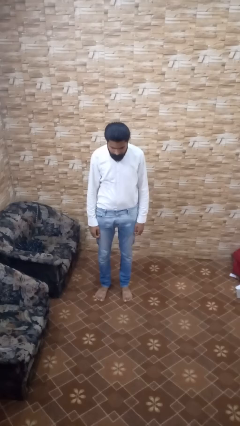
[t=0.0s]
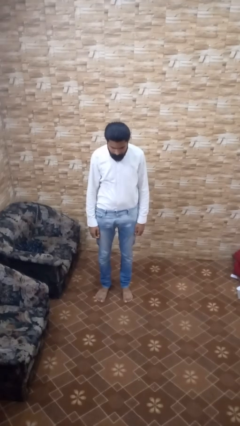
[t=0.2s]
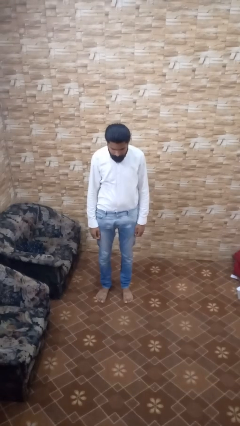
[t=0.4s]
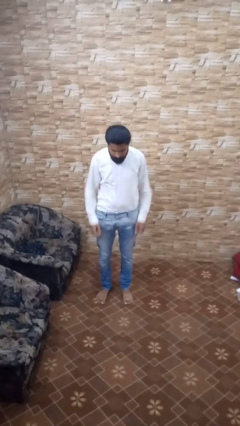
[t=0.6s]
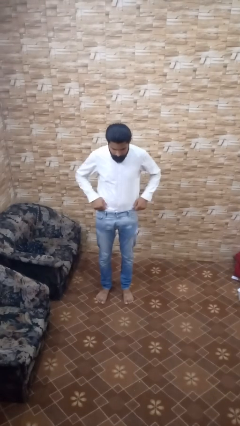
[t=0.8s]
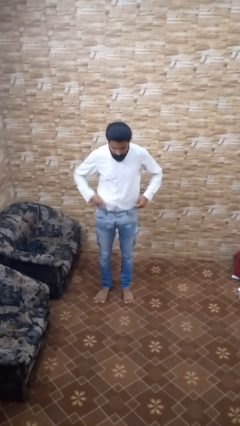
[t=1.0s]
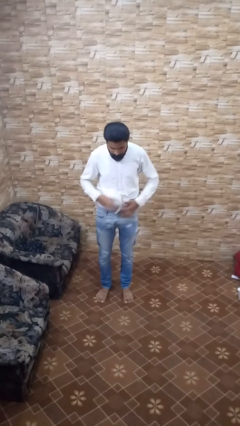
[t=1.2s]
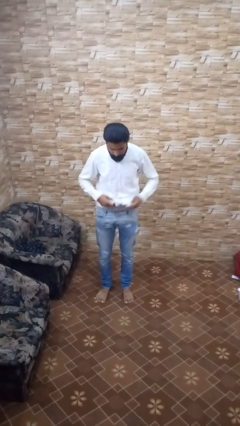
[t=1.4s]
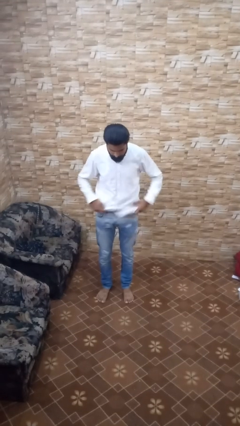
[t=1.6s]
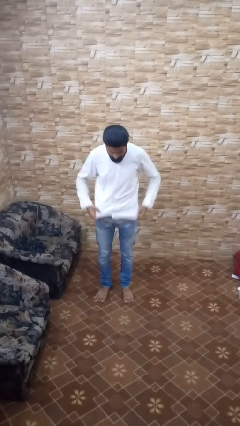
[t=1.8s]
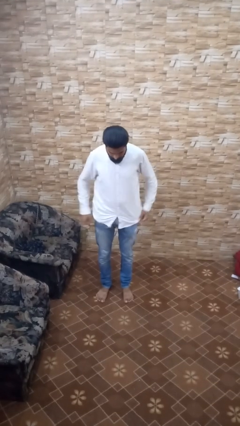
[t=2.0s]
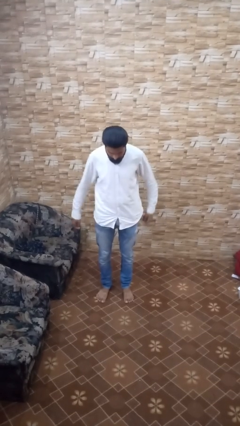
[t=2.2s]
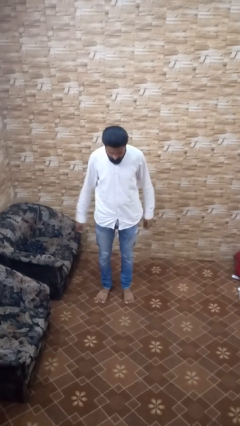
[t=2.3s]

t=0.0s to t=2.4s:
person untucks shirt

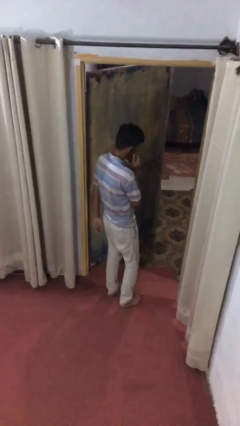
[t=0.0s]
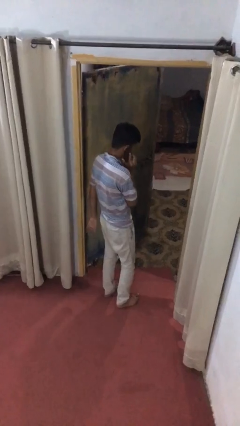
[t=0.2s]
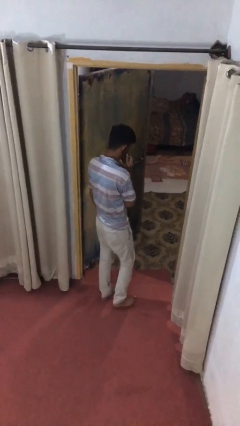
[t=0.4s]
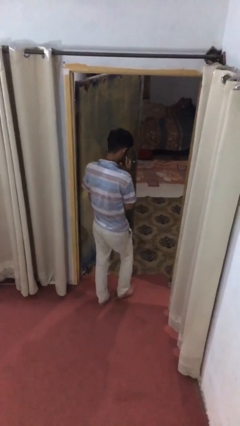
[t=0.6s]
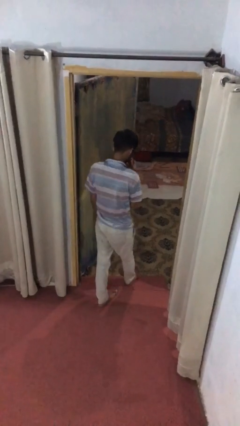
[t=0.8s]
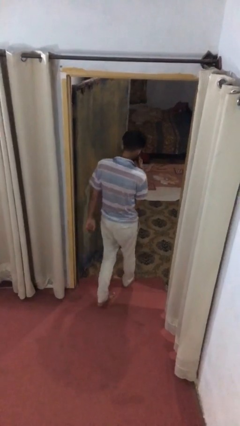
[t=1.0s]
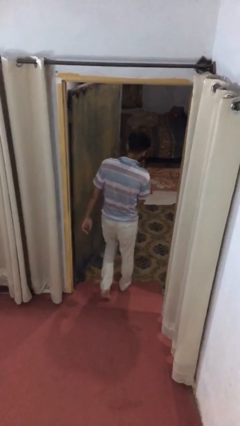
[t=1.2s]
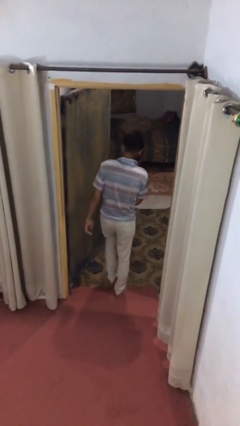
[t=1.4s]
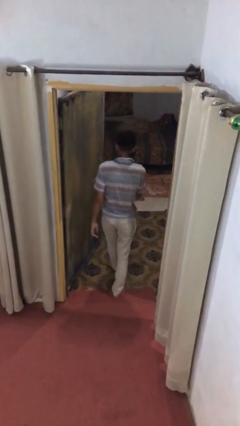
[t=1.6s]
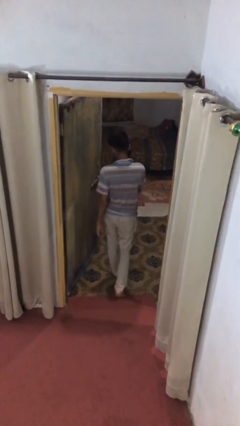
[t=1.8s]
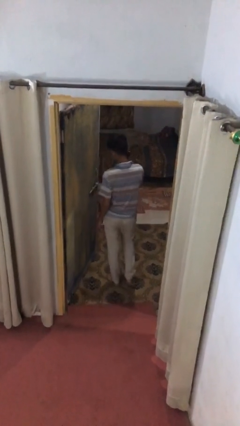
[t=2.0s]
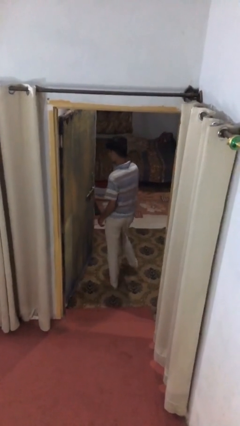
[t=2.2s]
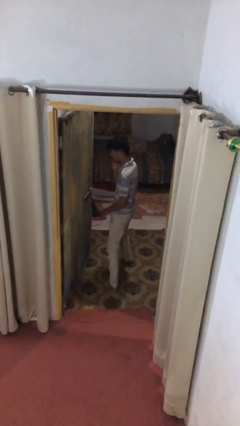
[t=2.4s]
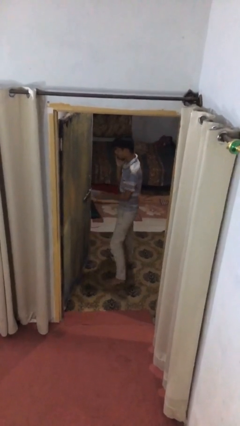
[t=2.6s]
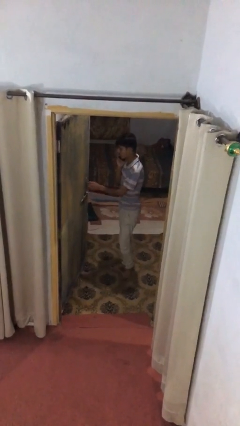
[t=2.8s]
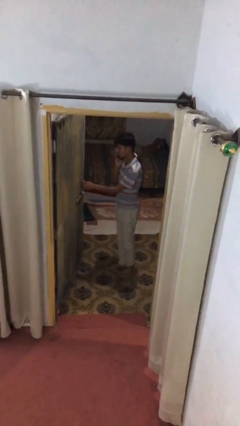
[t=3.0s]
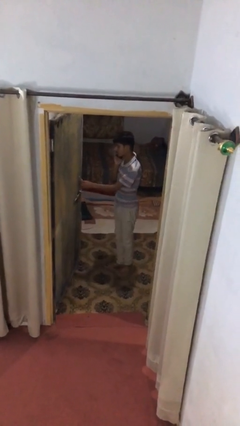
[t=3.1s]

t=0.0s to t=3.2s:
person exits scene through structure

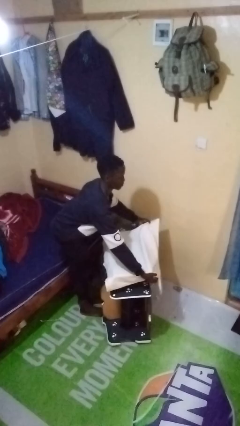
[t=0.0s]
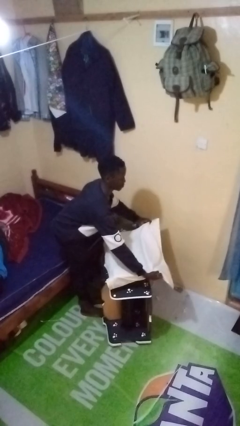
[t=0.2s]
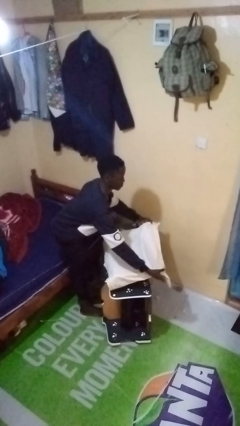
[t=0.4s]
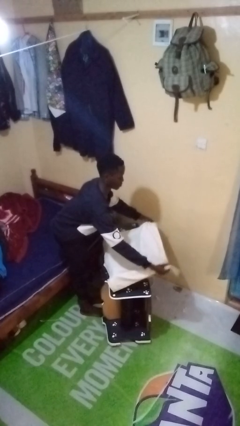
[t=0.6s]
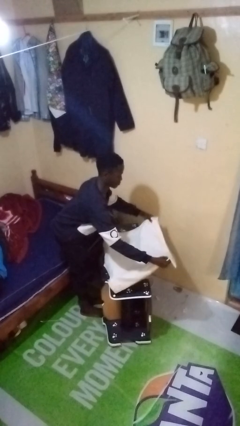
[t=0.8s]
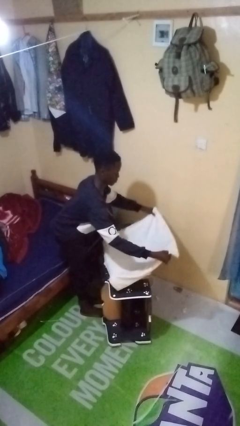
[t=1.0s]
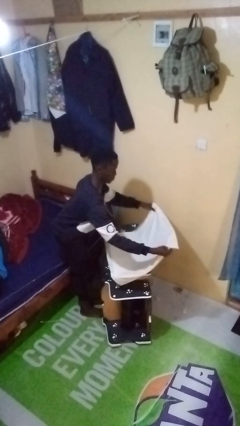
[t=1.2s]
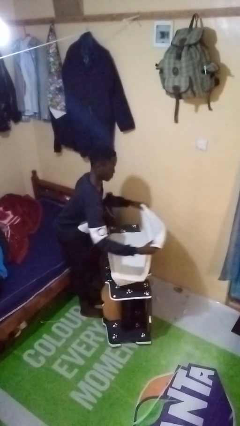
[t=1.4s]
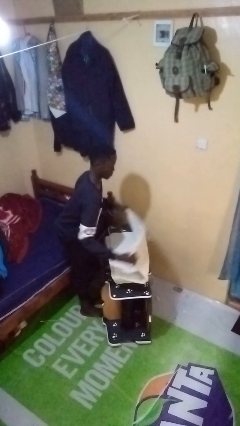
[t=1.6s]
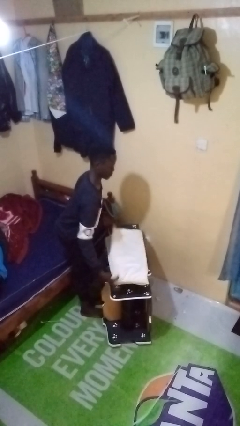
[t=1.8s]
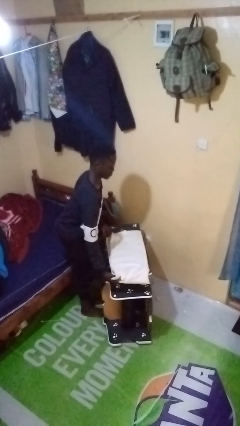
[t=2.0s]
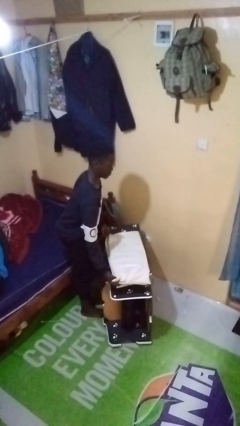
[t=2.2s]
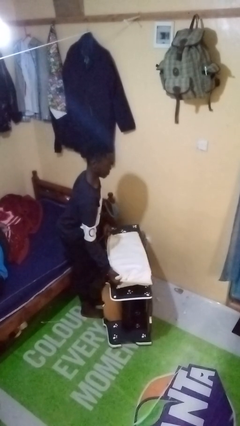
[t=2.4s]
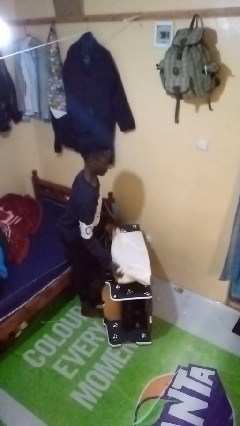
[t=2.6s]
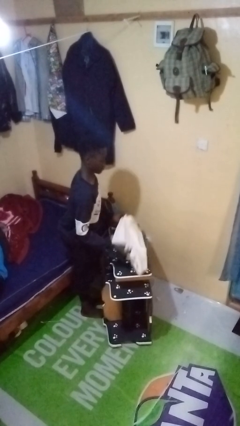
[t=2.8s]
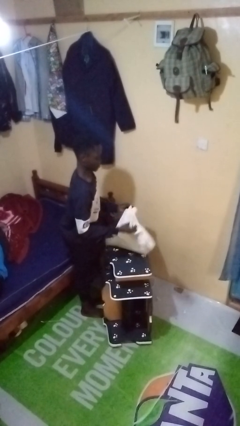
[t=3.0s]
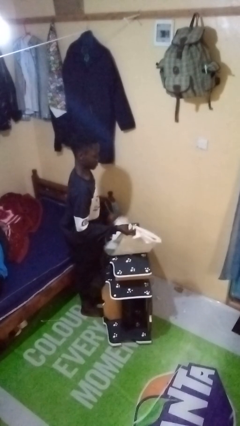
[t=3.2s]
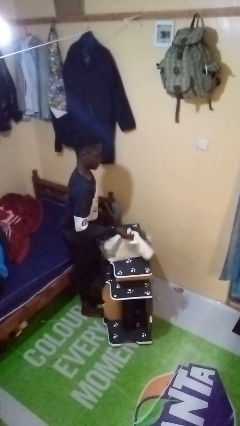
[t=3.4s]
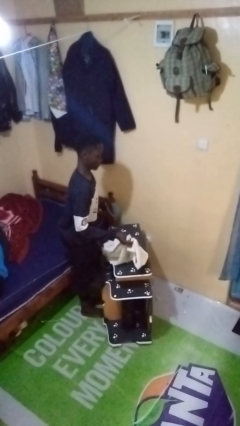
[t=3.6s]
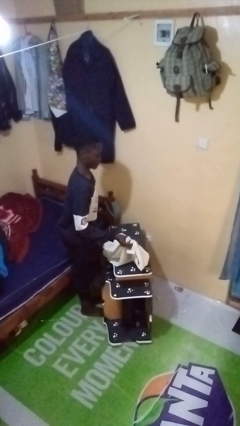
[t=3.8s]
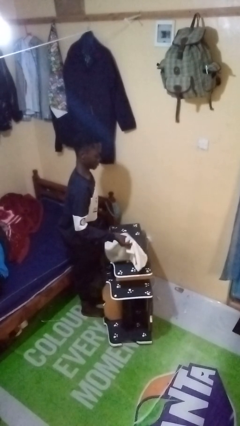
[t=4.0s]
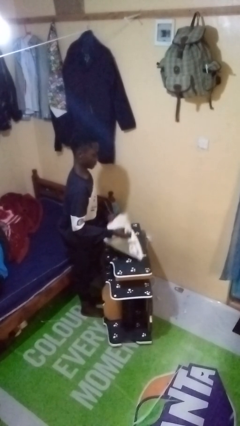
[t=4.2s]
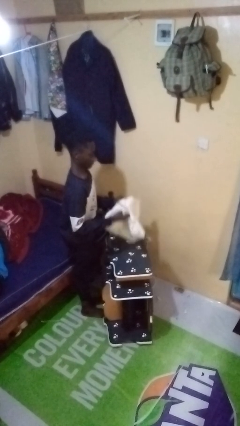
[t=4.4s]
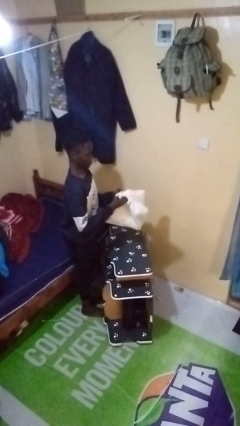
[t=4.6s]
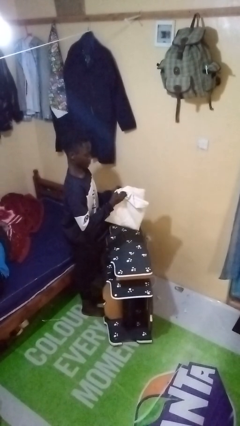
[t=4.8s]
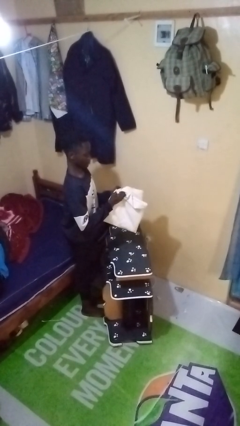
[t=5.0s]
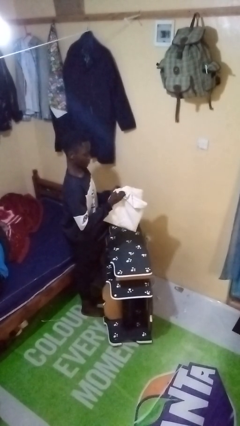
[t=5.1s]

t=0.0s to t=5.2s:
person folds tablecloth

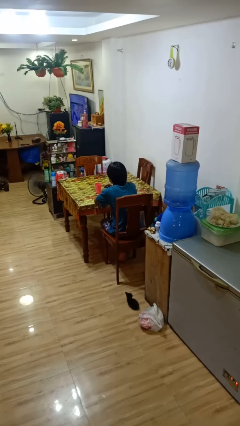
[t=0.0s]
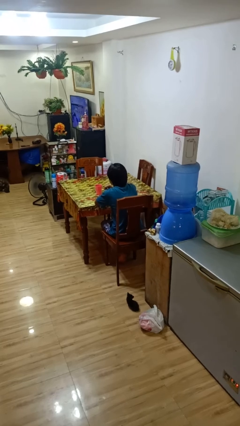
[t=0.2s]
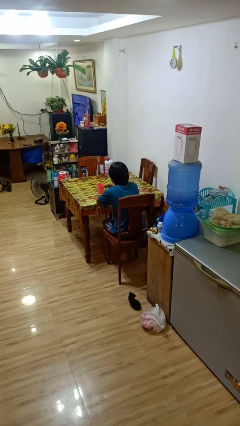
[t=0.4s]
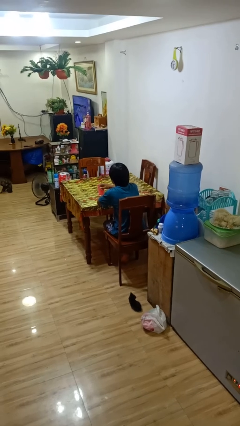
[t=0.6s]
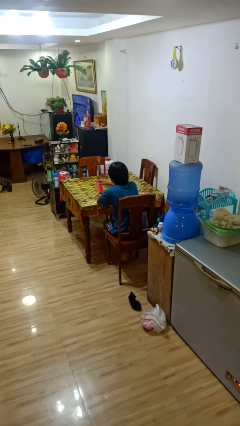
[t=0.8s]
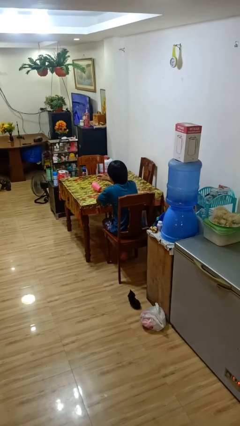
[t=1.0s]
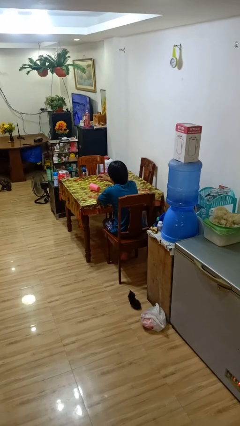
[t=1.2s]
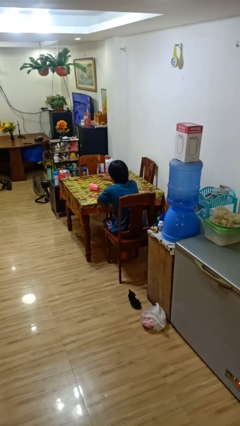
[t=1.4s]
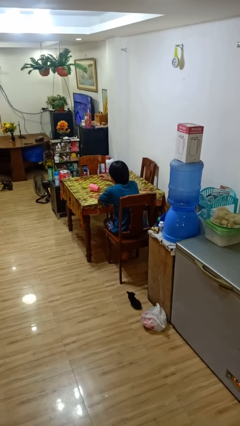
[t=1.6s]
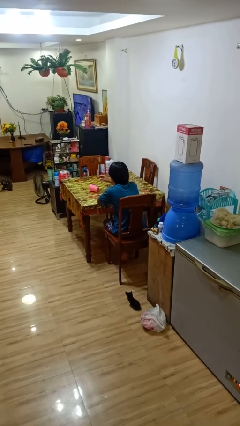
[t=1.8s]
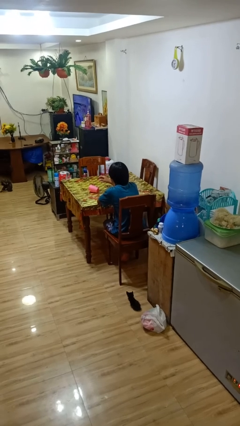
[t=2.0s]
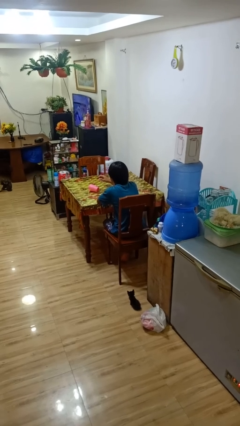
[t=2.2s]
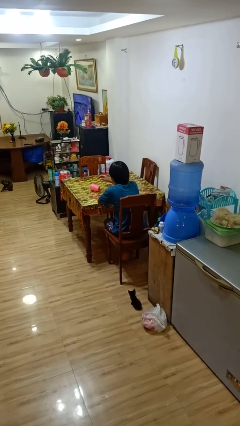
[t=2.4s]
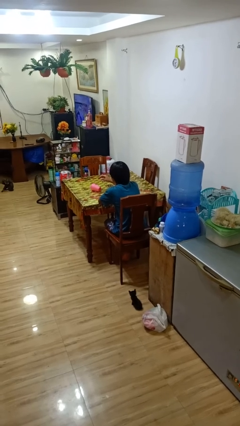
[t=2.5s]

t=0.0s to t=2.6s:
person knocks over glass

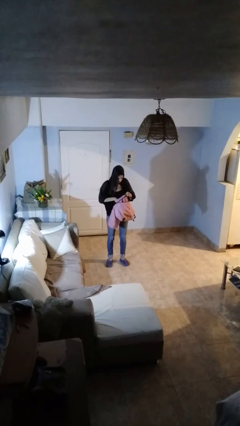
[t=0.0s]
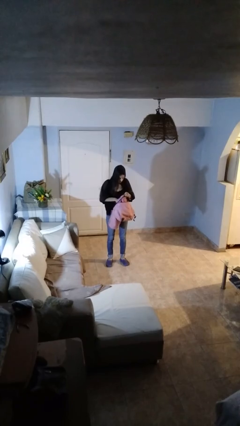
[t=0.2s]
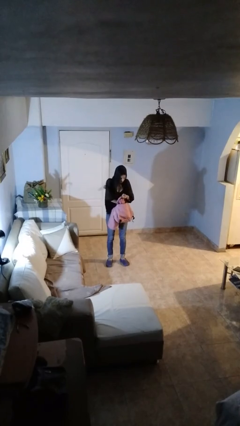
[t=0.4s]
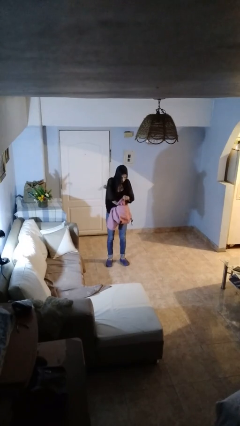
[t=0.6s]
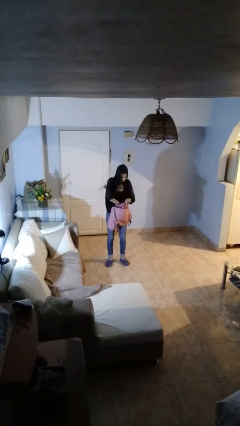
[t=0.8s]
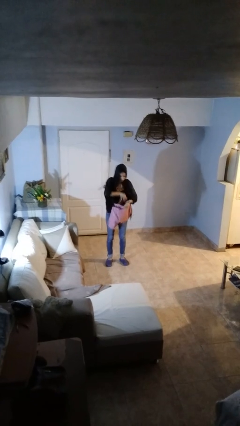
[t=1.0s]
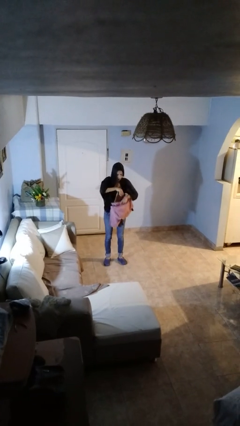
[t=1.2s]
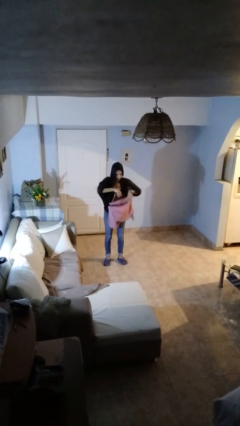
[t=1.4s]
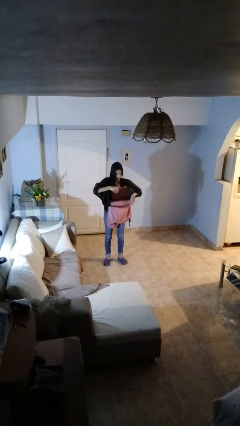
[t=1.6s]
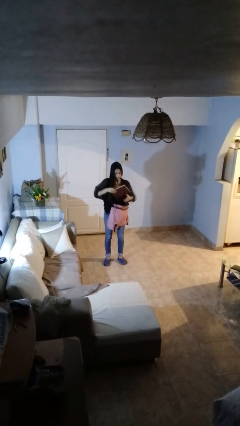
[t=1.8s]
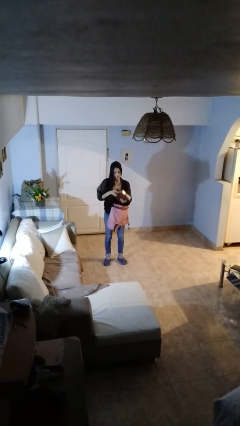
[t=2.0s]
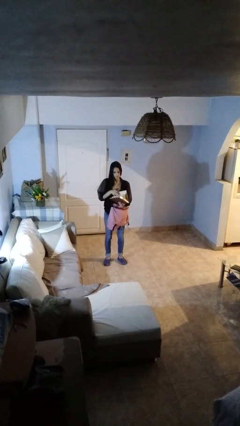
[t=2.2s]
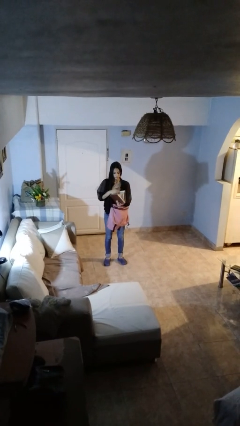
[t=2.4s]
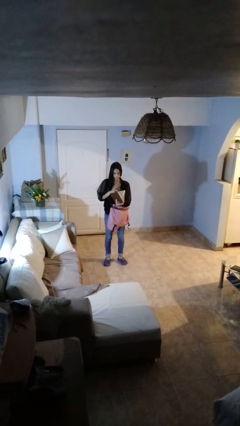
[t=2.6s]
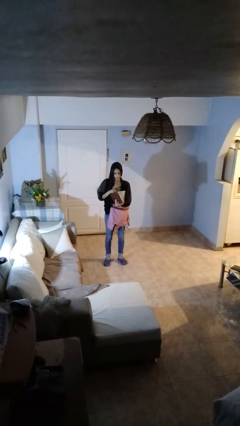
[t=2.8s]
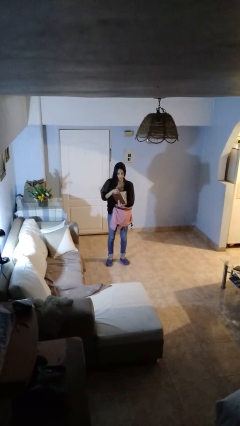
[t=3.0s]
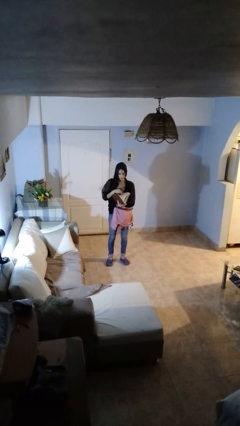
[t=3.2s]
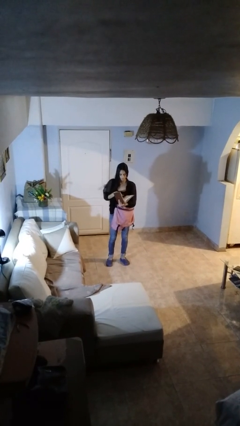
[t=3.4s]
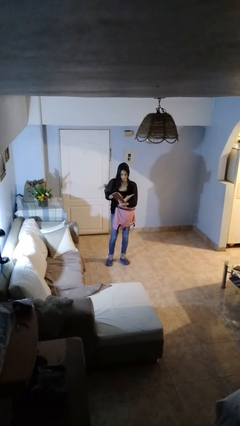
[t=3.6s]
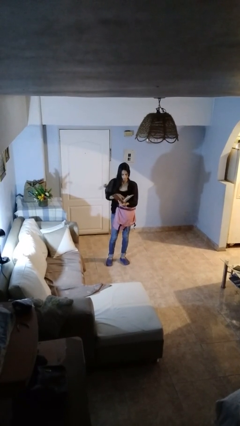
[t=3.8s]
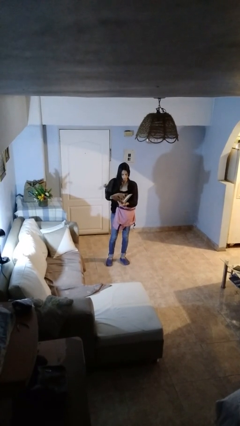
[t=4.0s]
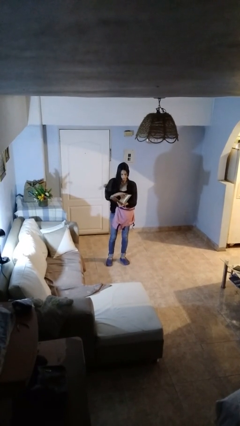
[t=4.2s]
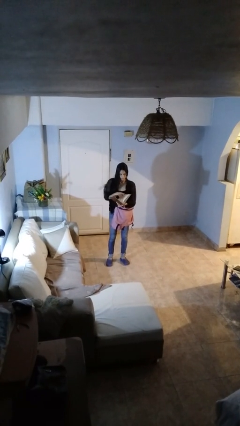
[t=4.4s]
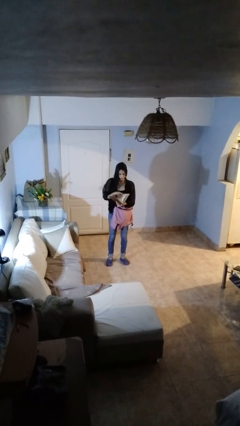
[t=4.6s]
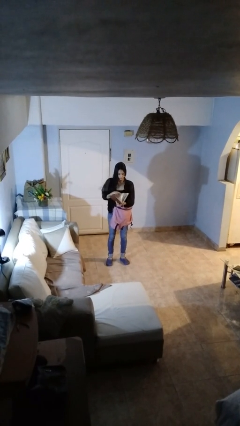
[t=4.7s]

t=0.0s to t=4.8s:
person takes object from backpack
